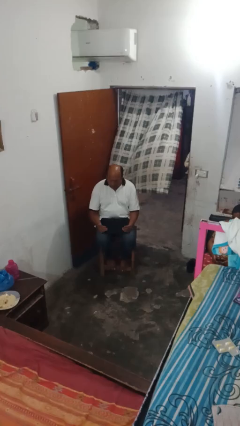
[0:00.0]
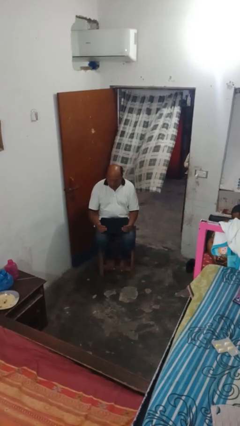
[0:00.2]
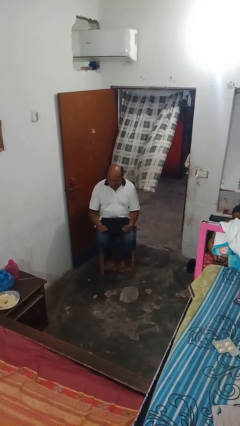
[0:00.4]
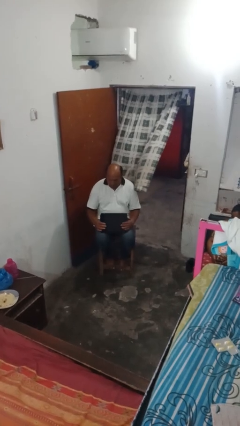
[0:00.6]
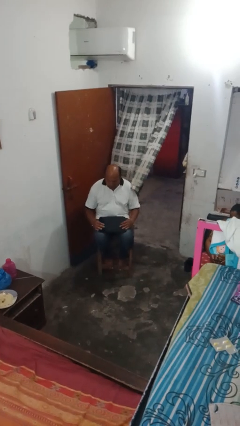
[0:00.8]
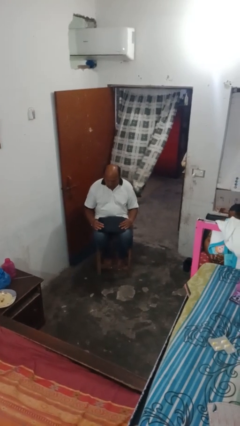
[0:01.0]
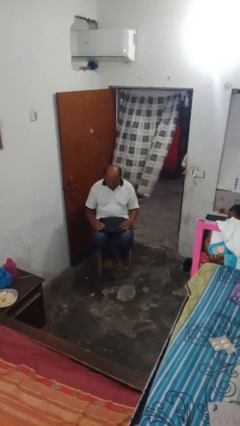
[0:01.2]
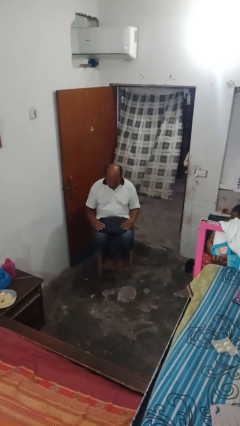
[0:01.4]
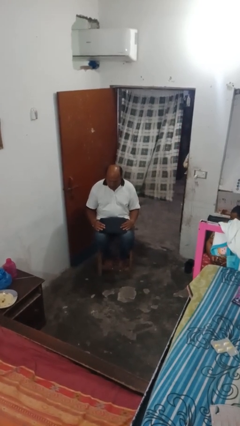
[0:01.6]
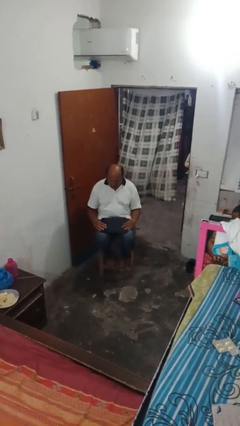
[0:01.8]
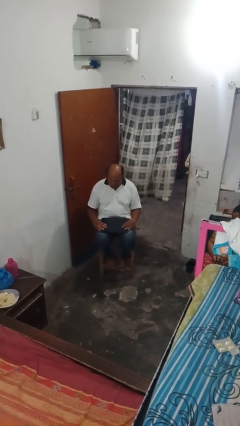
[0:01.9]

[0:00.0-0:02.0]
person closes laptop

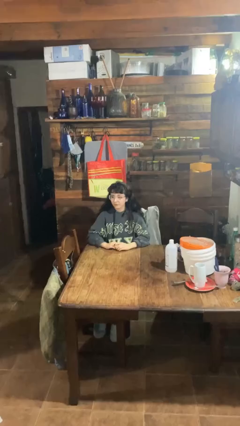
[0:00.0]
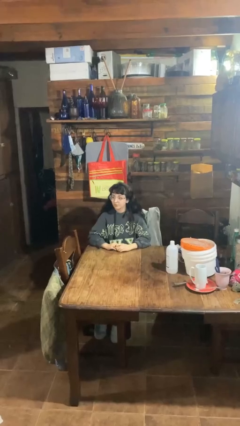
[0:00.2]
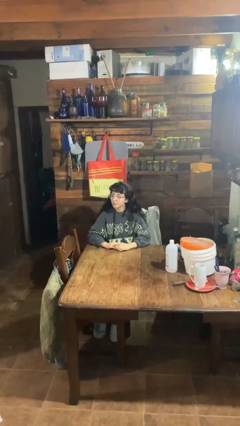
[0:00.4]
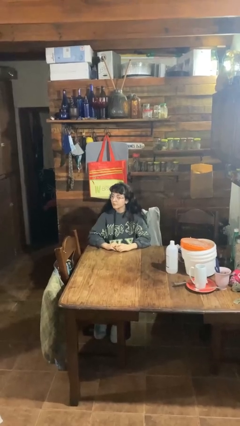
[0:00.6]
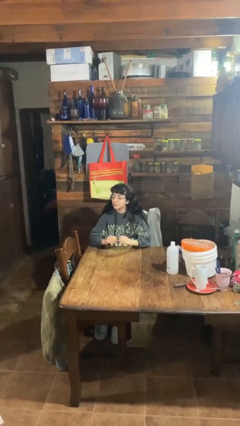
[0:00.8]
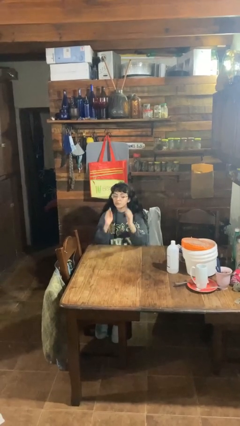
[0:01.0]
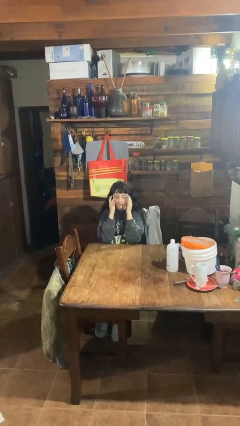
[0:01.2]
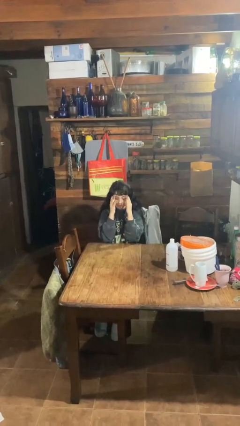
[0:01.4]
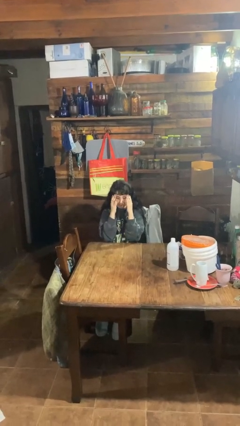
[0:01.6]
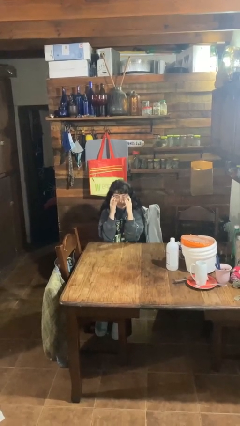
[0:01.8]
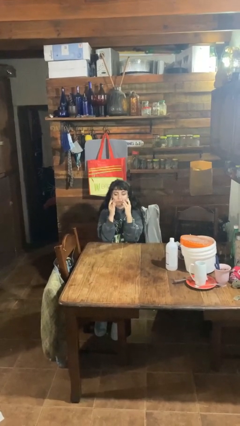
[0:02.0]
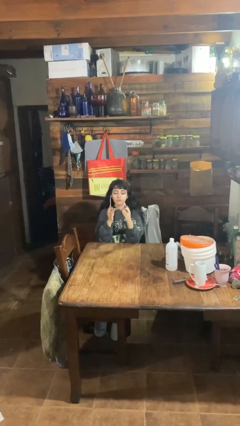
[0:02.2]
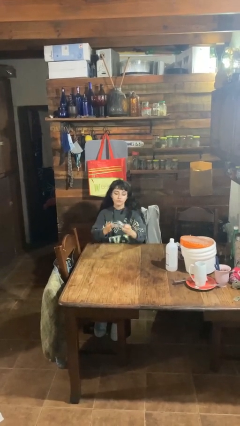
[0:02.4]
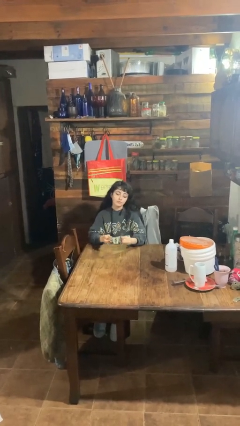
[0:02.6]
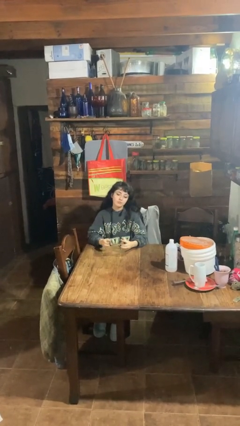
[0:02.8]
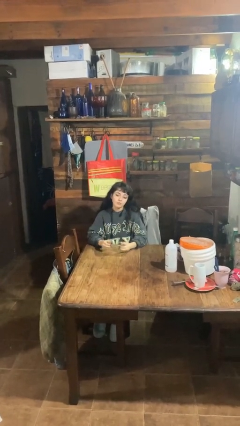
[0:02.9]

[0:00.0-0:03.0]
person takes off glasses

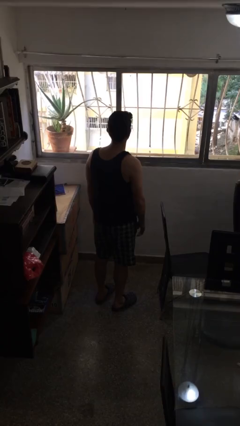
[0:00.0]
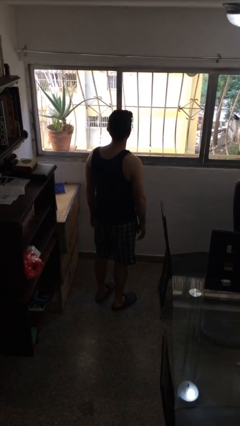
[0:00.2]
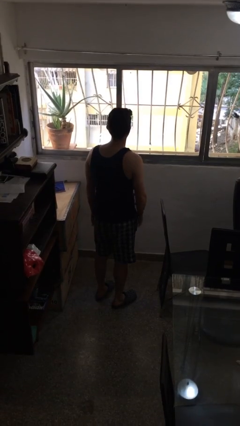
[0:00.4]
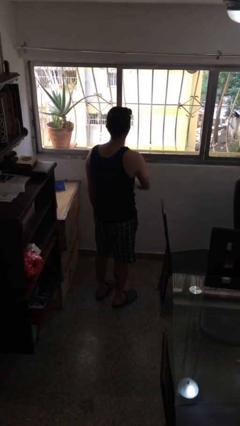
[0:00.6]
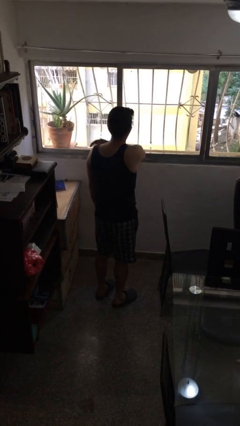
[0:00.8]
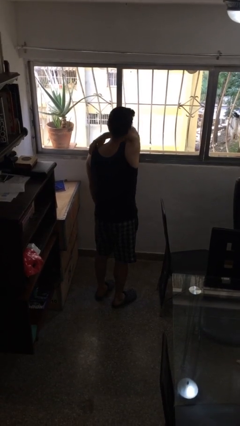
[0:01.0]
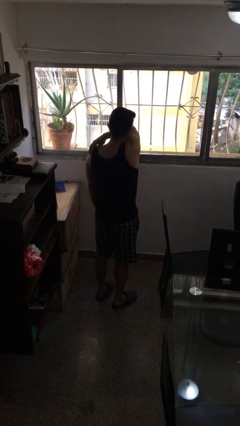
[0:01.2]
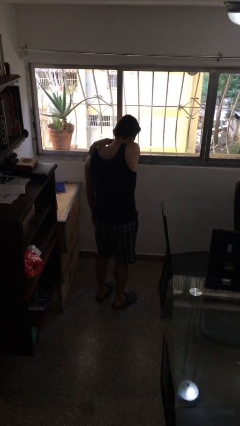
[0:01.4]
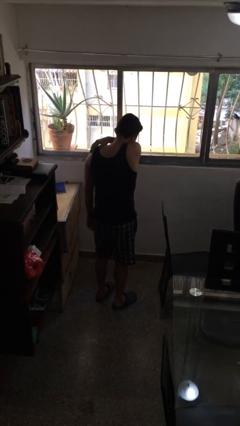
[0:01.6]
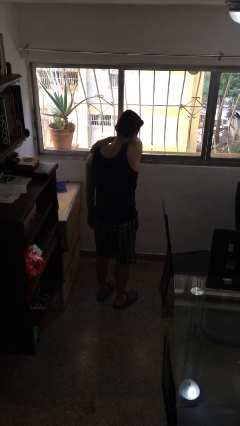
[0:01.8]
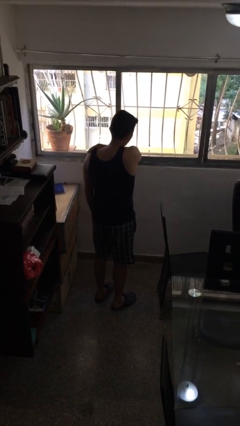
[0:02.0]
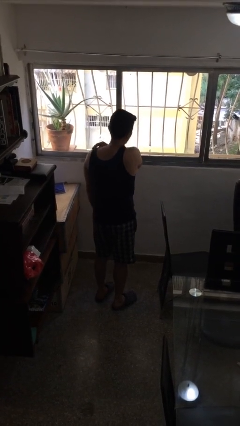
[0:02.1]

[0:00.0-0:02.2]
person sneezes into arm

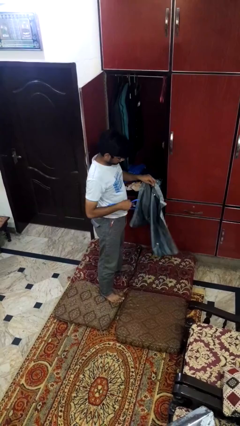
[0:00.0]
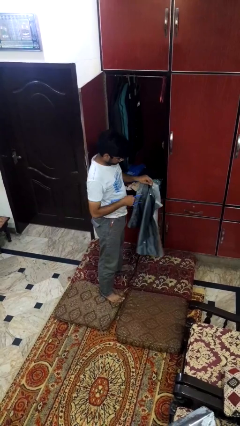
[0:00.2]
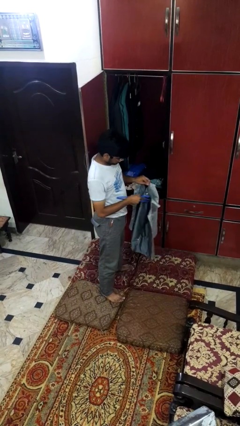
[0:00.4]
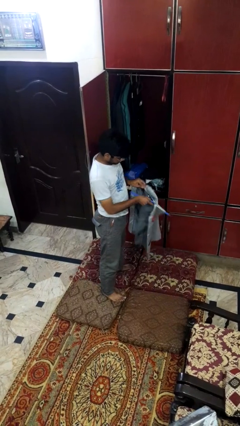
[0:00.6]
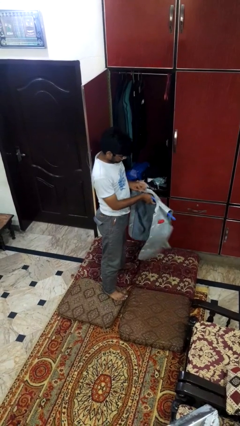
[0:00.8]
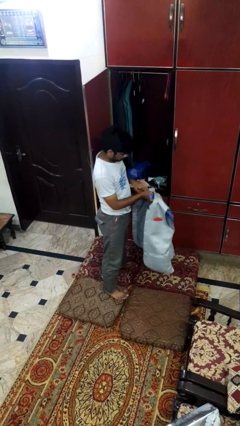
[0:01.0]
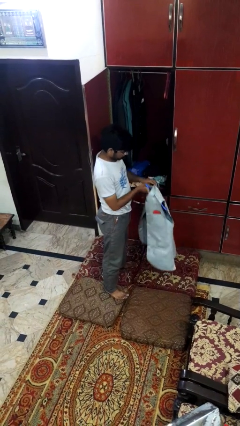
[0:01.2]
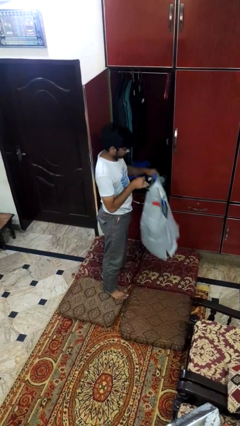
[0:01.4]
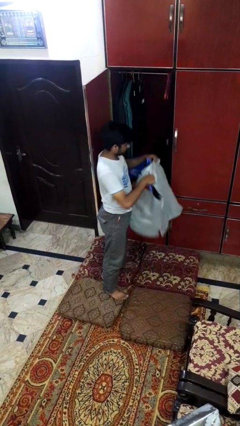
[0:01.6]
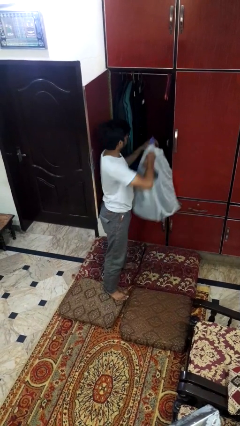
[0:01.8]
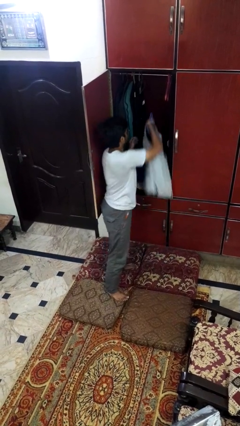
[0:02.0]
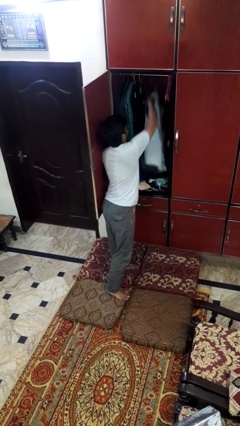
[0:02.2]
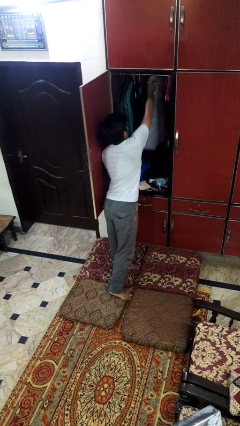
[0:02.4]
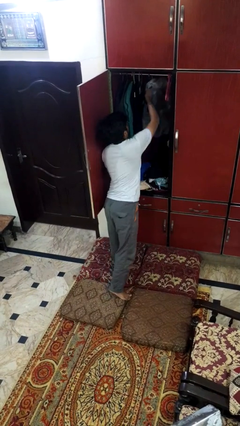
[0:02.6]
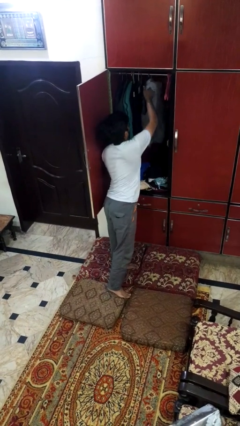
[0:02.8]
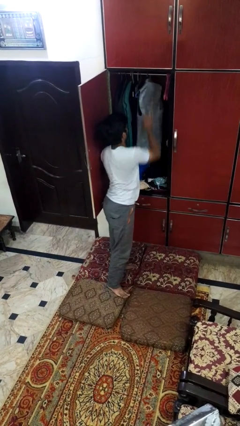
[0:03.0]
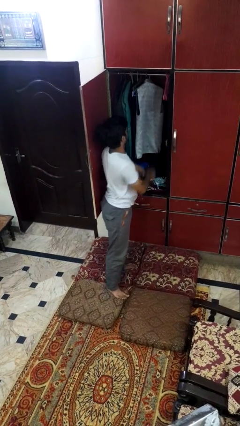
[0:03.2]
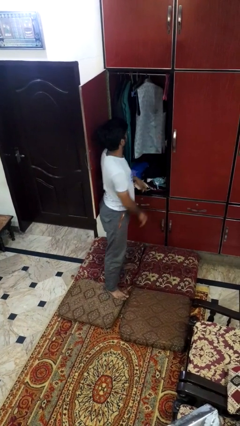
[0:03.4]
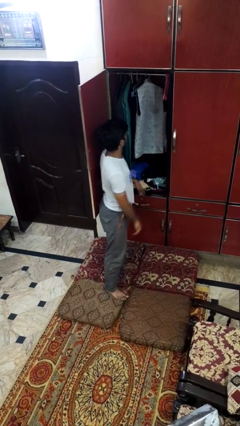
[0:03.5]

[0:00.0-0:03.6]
person puts clothes into closet

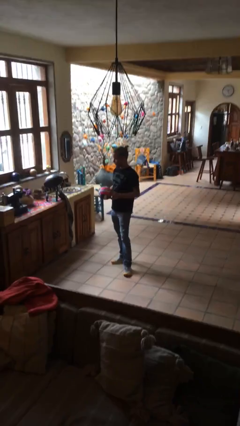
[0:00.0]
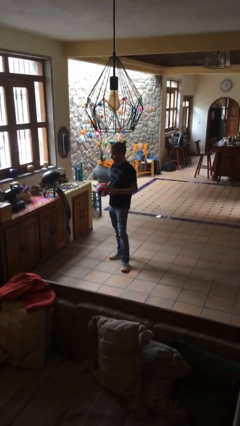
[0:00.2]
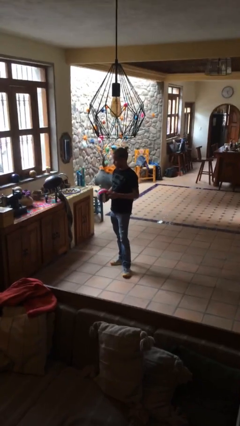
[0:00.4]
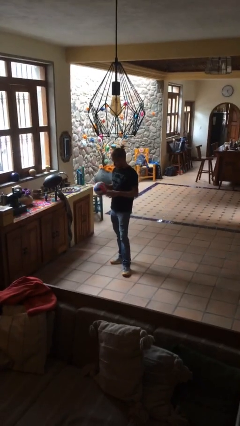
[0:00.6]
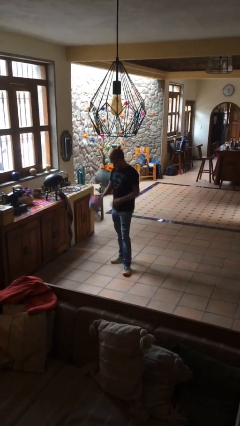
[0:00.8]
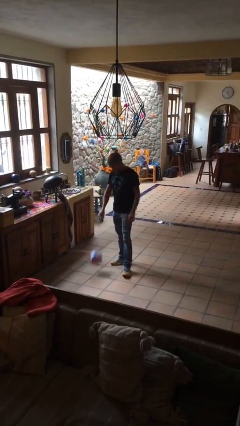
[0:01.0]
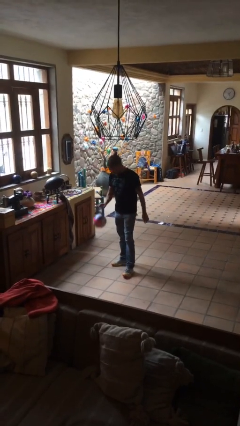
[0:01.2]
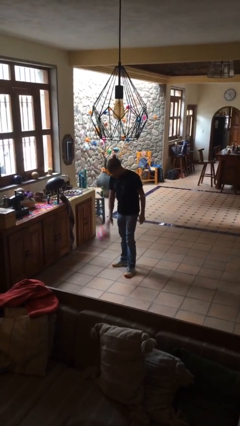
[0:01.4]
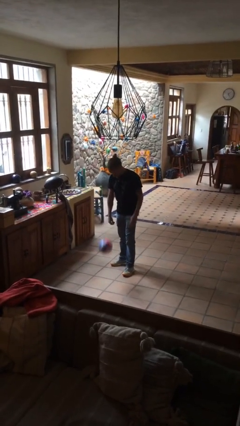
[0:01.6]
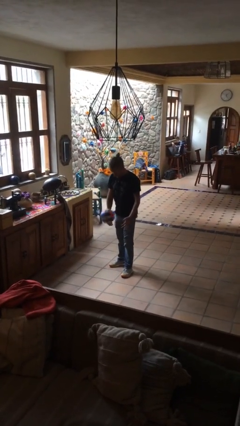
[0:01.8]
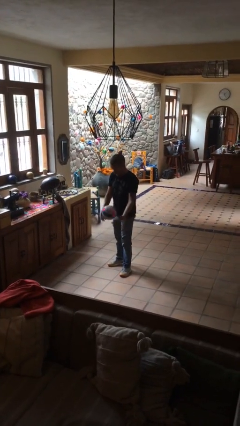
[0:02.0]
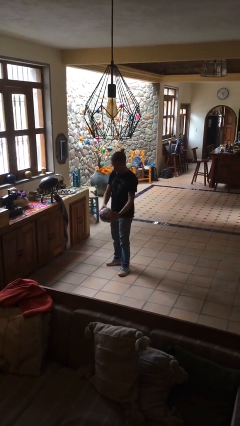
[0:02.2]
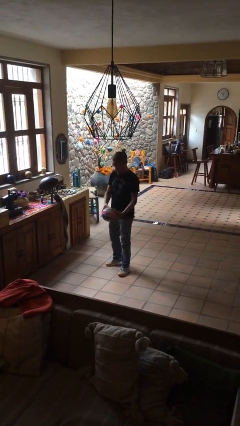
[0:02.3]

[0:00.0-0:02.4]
person bounces ball on floor

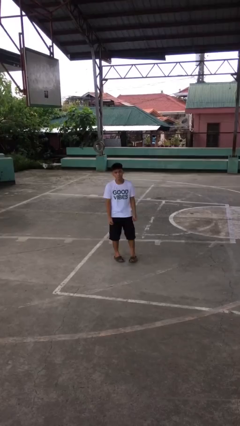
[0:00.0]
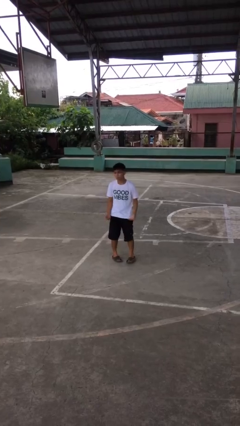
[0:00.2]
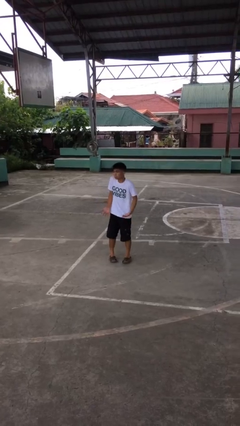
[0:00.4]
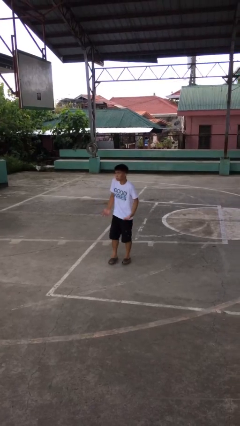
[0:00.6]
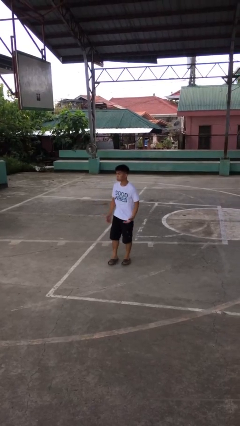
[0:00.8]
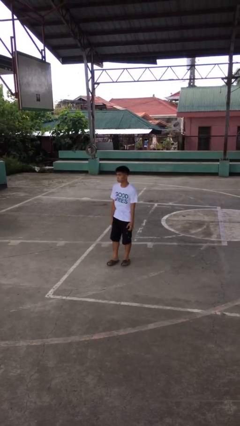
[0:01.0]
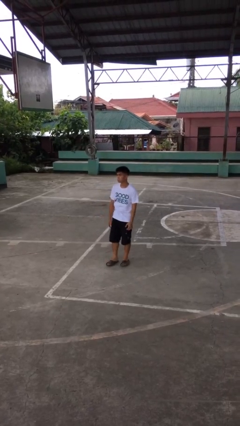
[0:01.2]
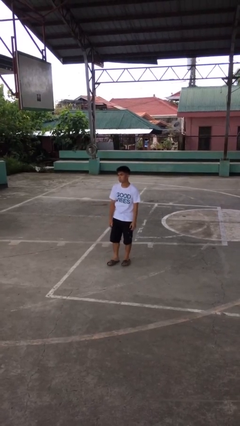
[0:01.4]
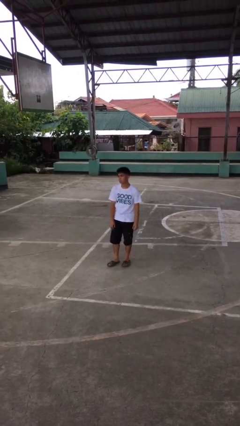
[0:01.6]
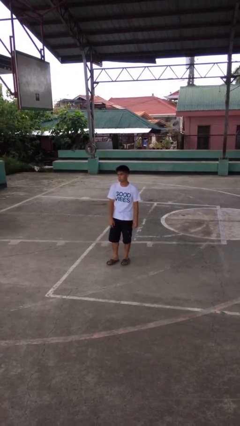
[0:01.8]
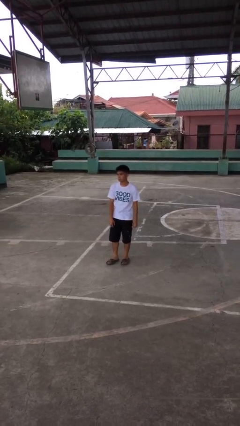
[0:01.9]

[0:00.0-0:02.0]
person shrugs

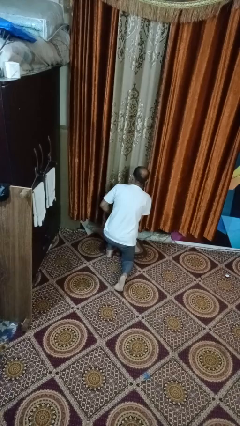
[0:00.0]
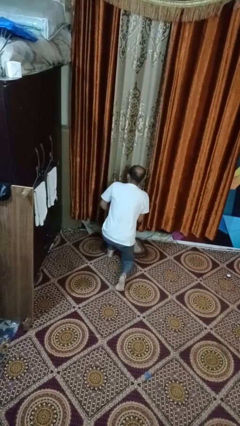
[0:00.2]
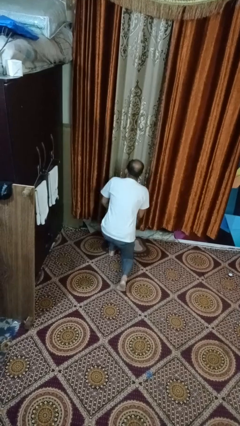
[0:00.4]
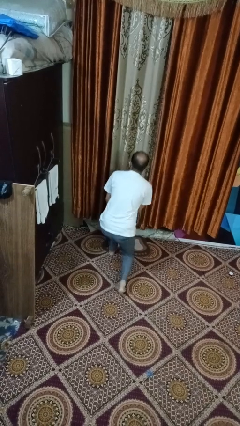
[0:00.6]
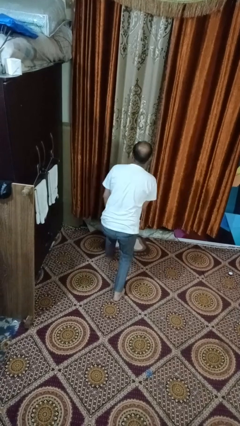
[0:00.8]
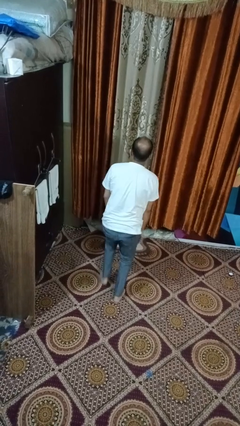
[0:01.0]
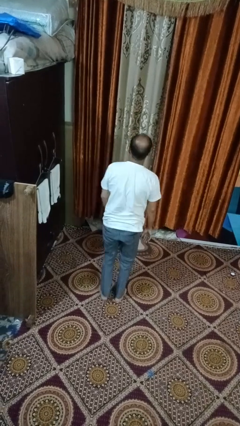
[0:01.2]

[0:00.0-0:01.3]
person stands up from floor

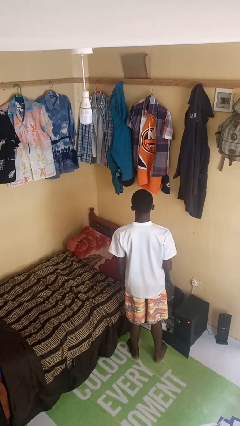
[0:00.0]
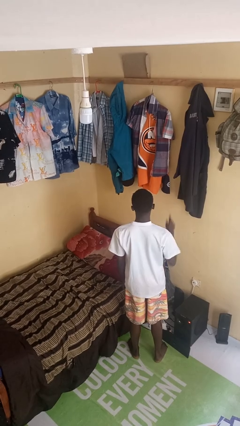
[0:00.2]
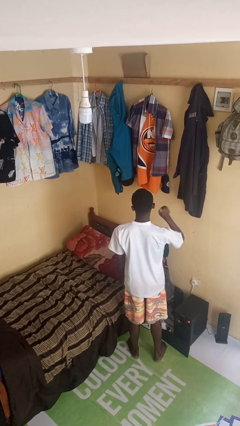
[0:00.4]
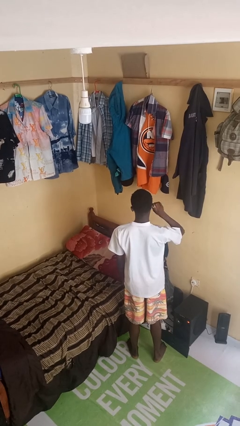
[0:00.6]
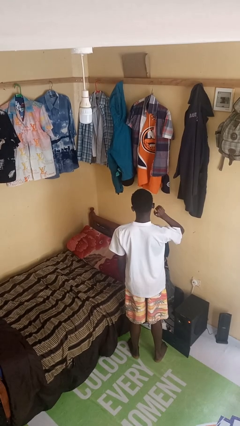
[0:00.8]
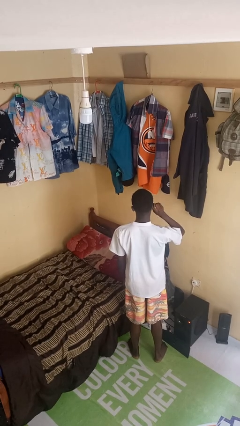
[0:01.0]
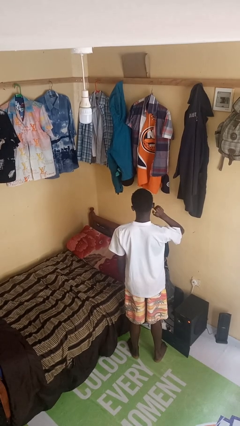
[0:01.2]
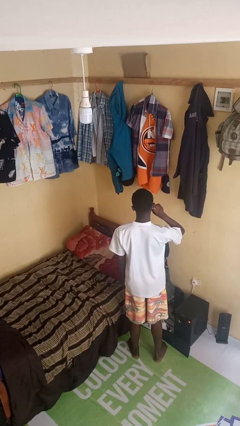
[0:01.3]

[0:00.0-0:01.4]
person gestures listen closely
